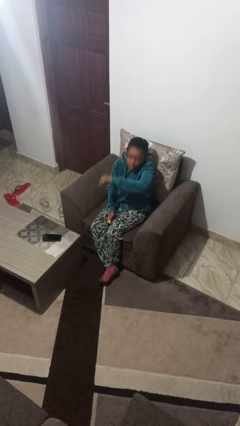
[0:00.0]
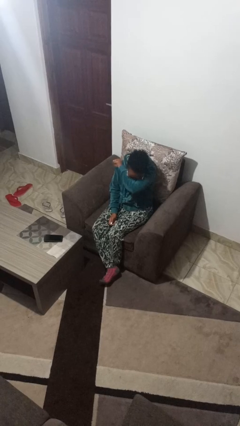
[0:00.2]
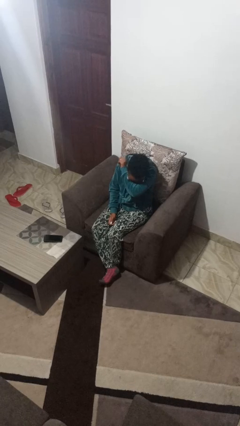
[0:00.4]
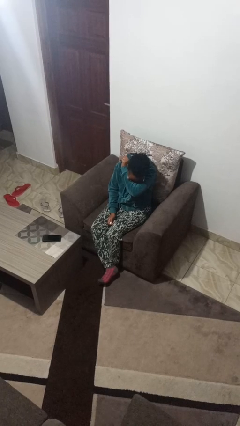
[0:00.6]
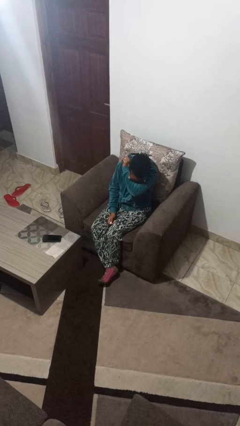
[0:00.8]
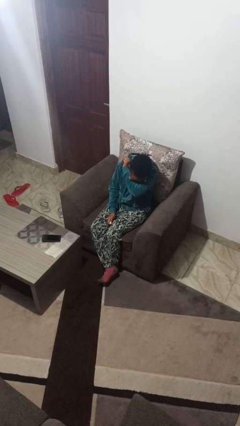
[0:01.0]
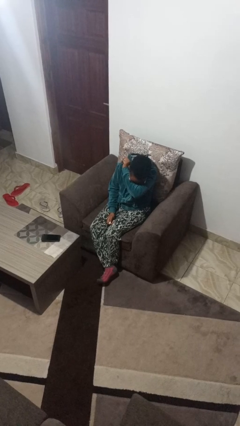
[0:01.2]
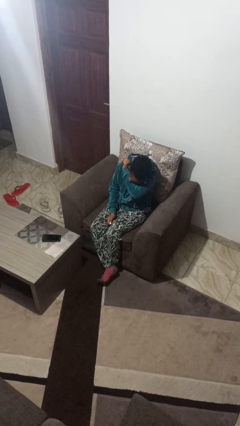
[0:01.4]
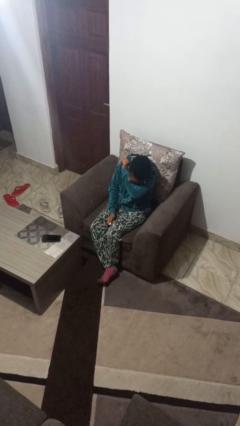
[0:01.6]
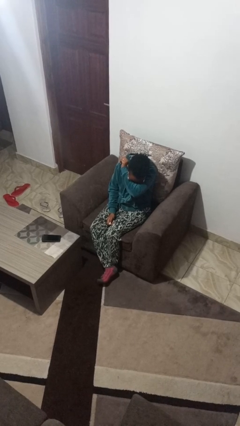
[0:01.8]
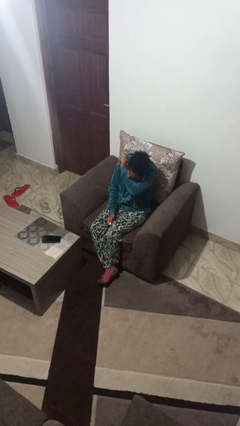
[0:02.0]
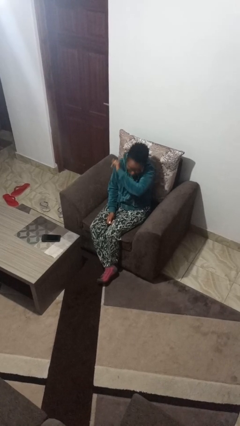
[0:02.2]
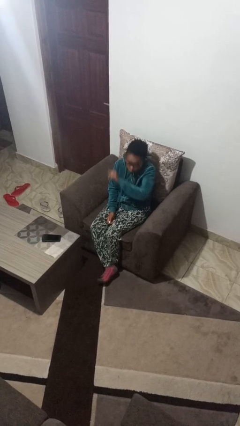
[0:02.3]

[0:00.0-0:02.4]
person sneezes into arm

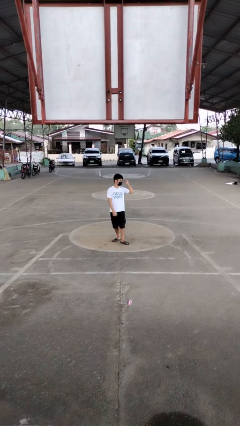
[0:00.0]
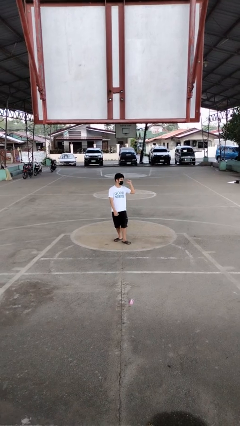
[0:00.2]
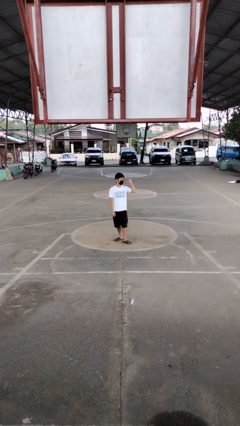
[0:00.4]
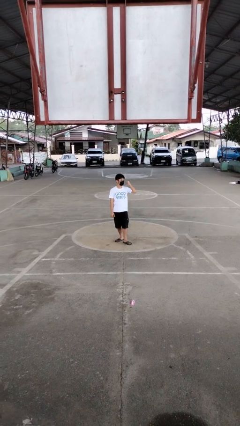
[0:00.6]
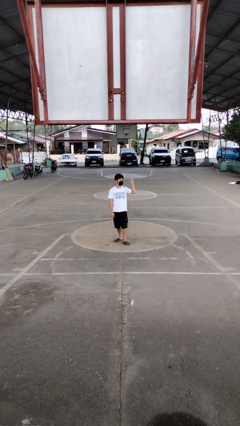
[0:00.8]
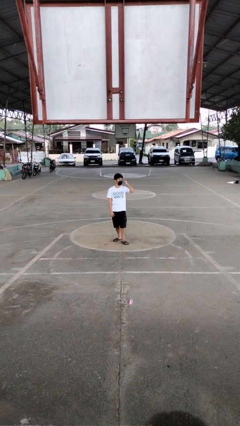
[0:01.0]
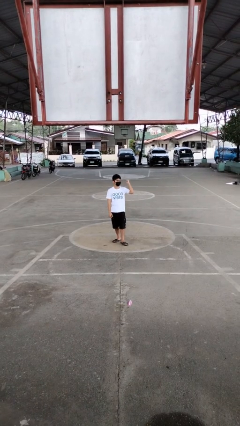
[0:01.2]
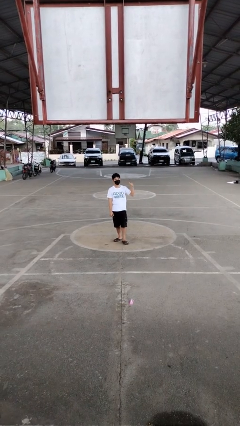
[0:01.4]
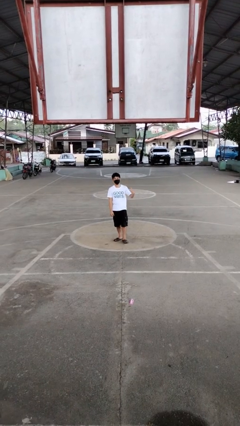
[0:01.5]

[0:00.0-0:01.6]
person gestures behind me

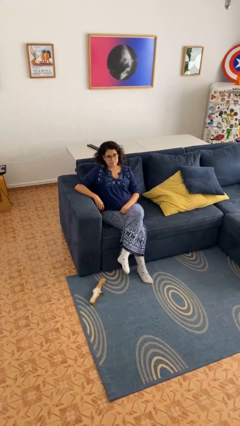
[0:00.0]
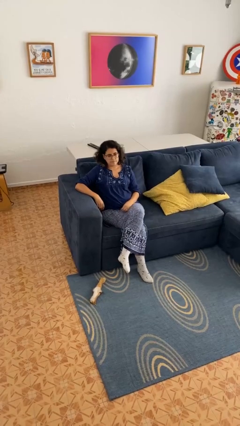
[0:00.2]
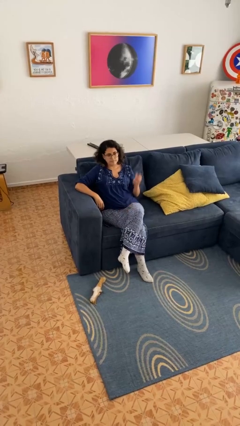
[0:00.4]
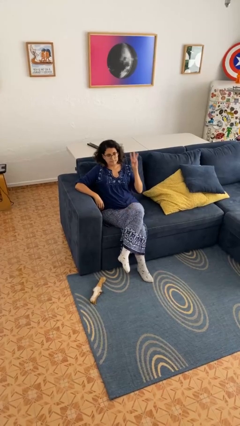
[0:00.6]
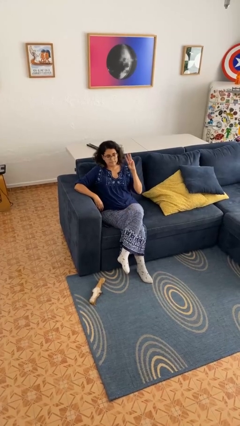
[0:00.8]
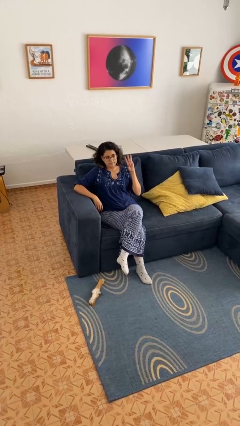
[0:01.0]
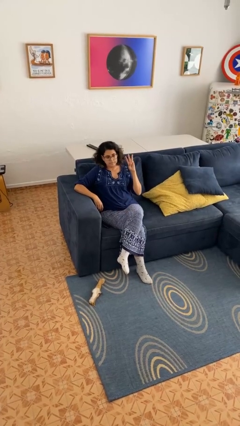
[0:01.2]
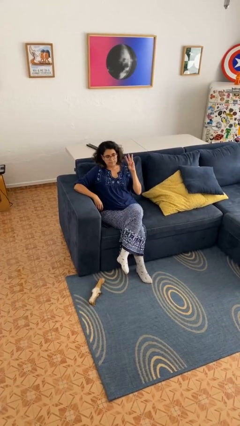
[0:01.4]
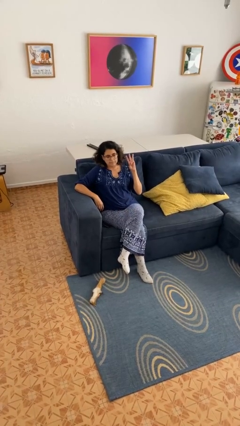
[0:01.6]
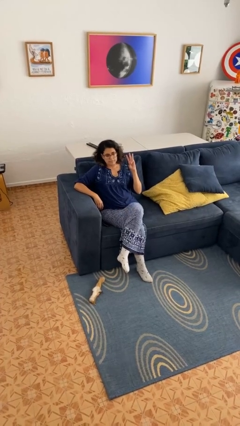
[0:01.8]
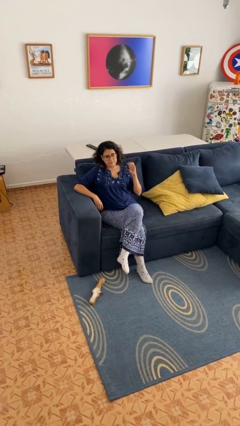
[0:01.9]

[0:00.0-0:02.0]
person gestures number three

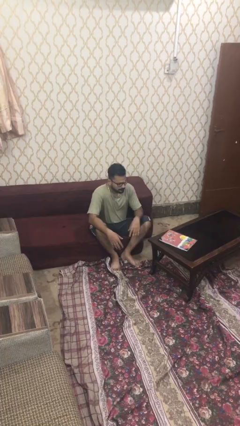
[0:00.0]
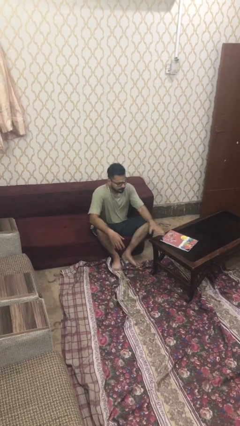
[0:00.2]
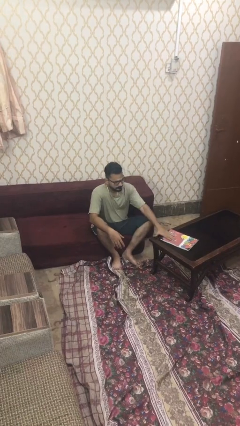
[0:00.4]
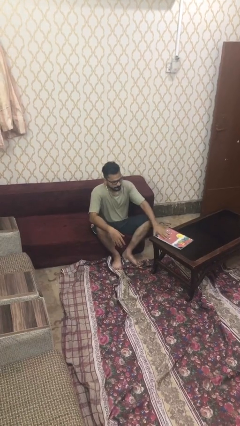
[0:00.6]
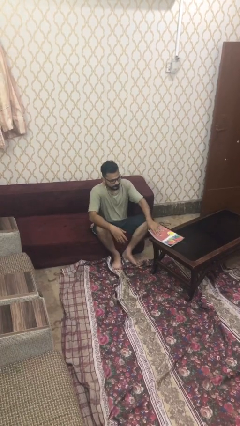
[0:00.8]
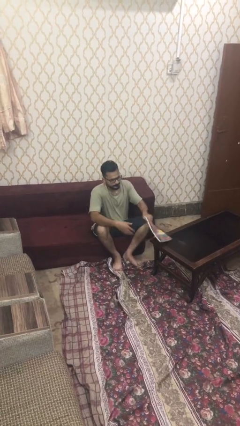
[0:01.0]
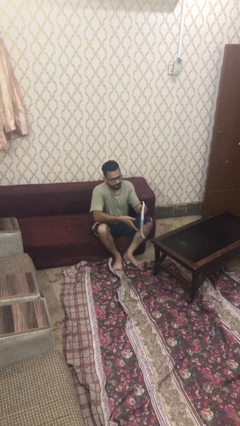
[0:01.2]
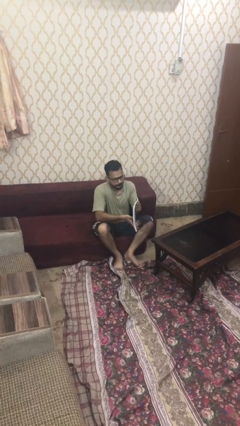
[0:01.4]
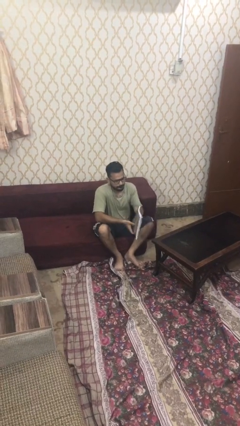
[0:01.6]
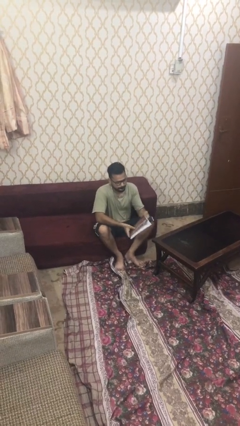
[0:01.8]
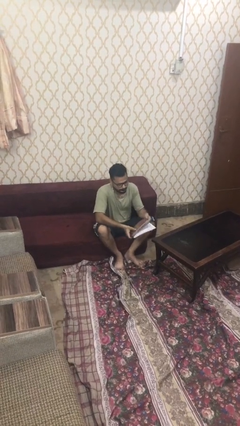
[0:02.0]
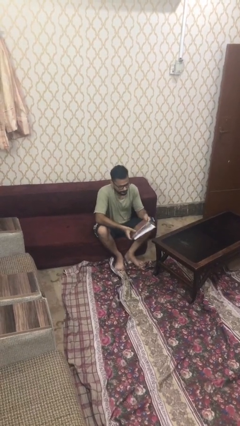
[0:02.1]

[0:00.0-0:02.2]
person picks up object from table

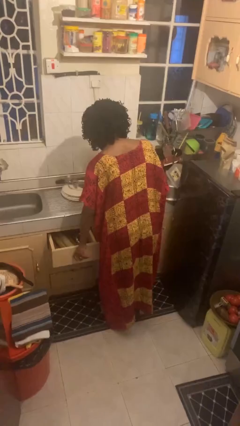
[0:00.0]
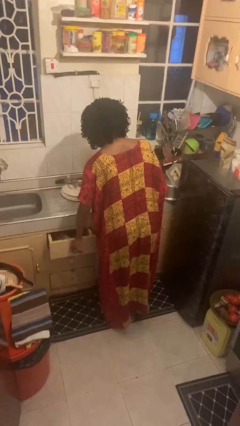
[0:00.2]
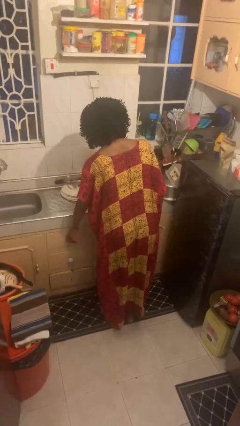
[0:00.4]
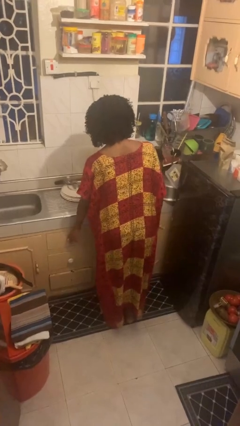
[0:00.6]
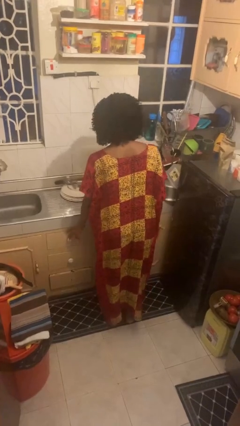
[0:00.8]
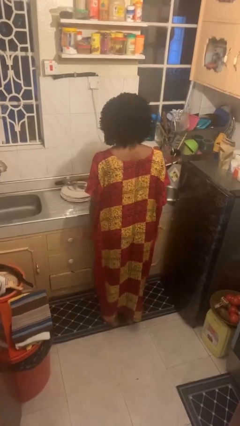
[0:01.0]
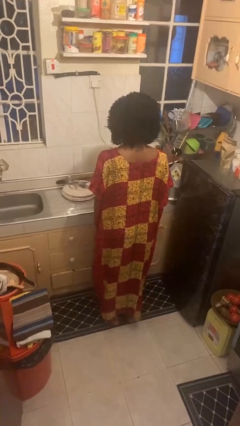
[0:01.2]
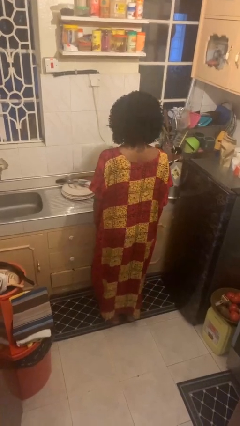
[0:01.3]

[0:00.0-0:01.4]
person closes kitchen drawer

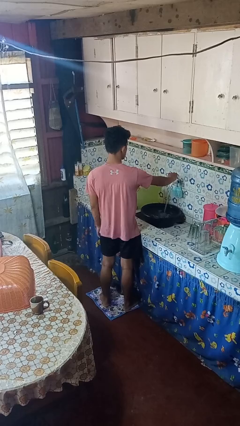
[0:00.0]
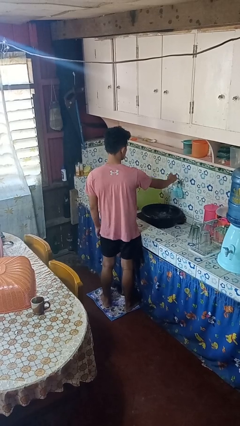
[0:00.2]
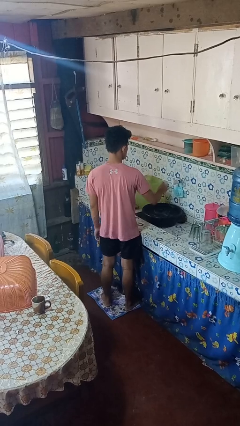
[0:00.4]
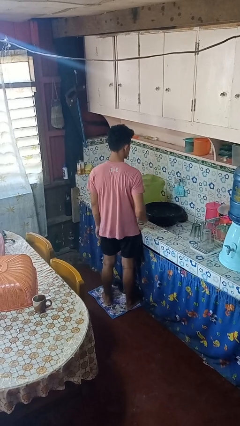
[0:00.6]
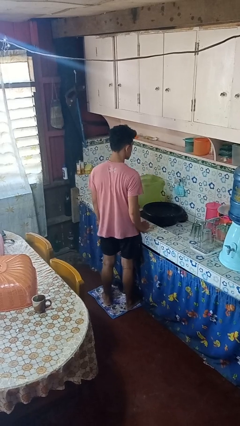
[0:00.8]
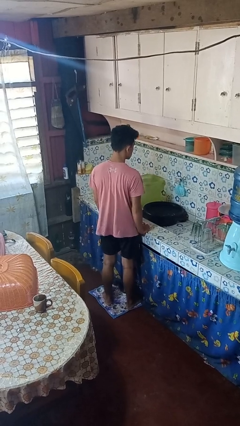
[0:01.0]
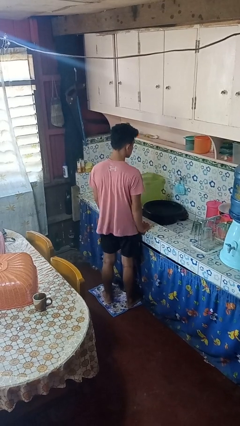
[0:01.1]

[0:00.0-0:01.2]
person turns off faucet

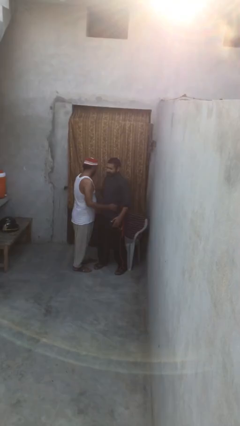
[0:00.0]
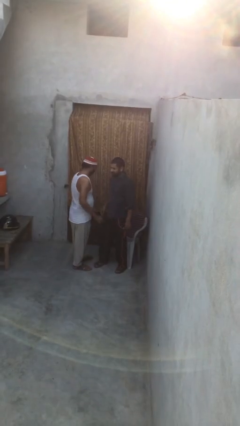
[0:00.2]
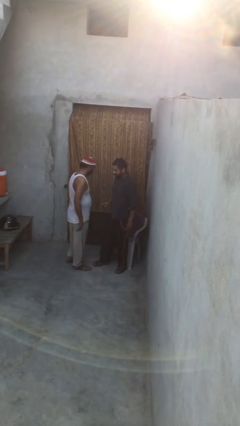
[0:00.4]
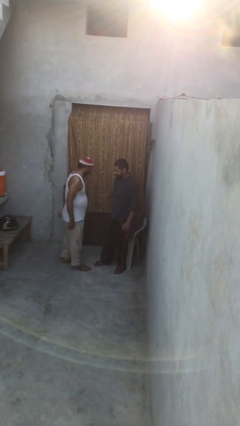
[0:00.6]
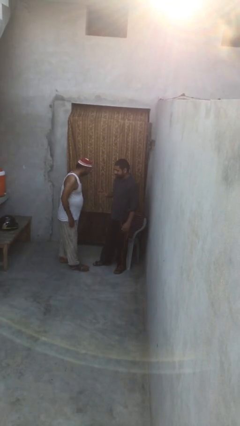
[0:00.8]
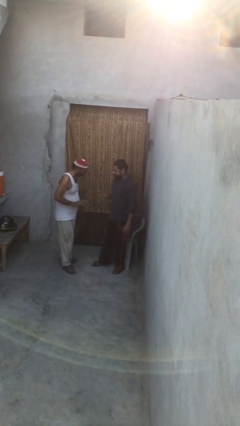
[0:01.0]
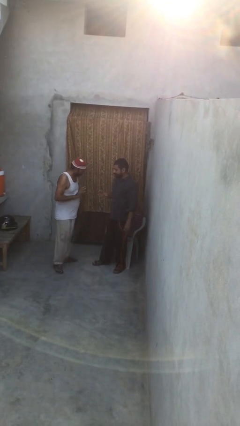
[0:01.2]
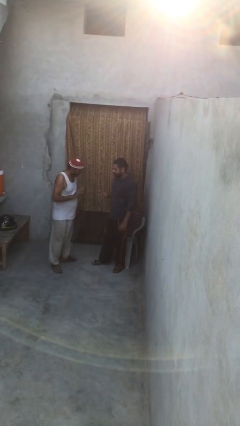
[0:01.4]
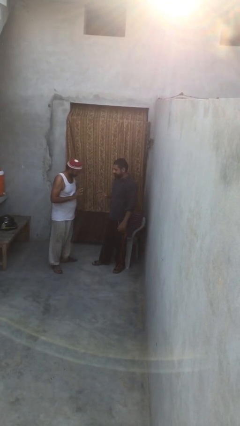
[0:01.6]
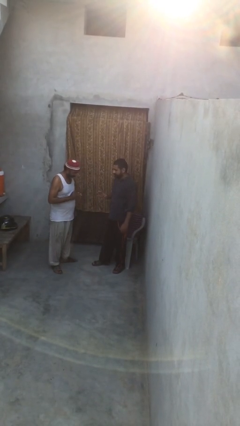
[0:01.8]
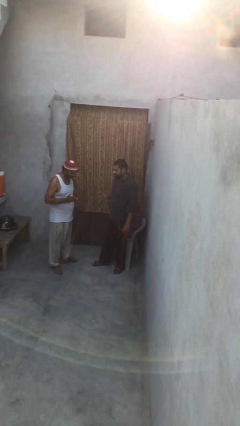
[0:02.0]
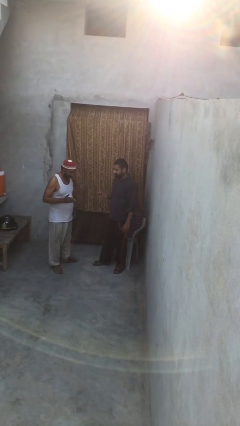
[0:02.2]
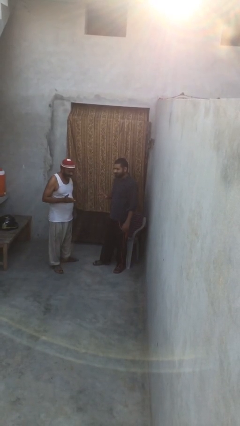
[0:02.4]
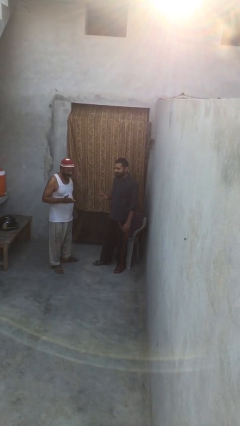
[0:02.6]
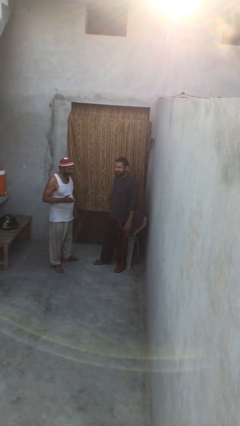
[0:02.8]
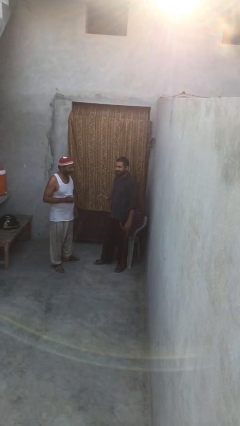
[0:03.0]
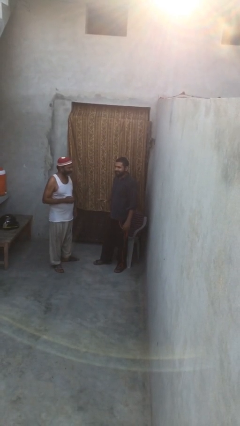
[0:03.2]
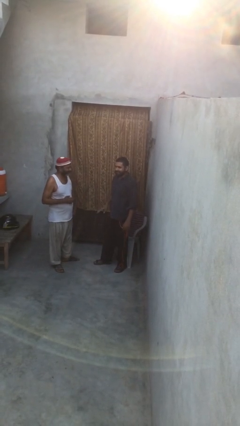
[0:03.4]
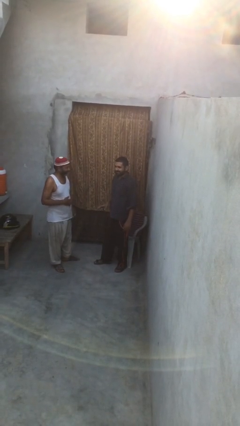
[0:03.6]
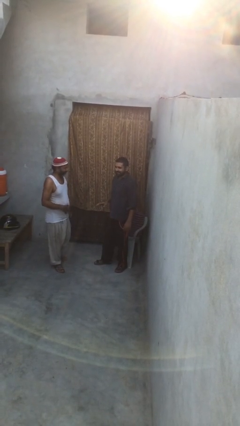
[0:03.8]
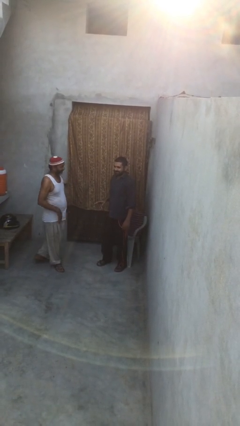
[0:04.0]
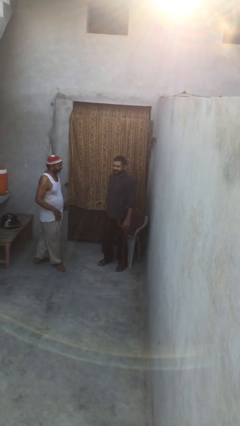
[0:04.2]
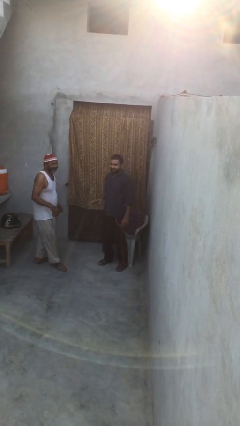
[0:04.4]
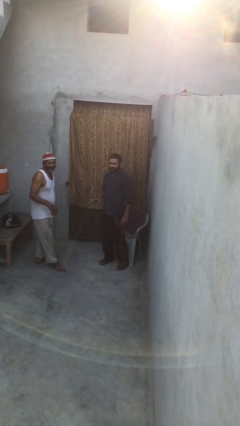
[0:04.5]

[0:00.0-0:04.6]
person talks to person

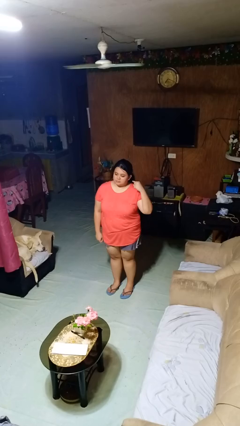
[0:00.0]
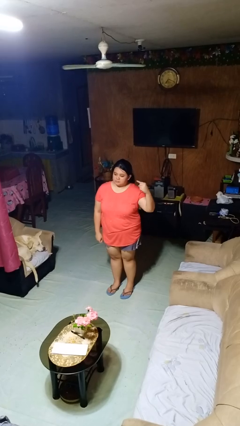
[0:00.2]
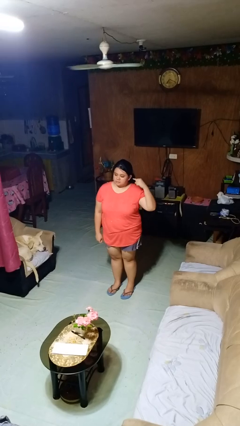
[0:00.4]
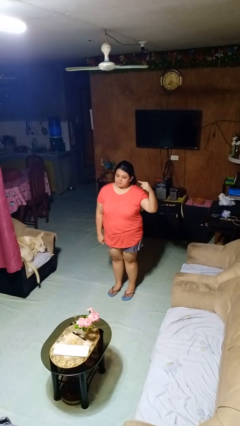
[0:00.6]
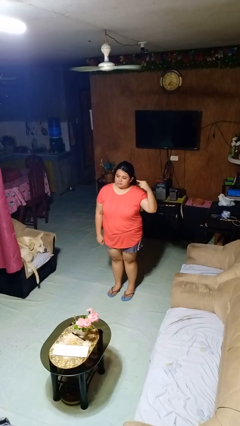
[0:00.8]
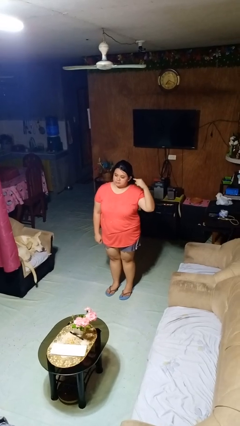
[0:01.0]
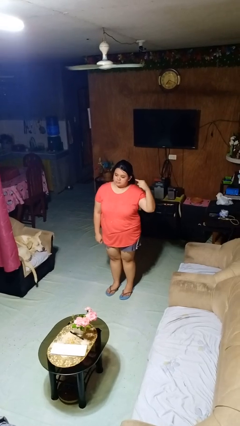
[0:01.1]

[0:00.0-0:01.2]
person gestures listen closely
